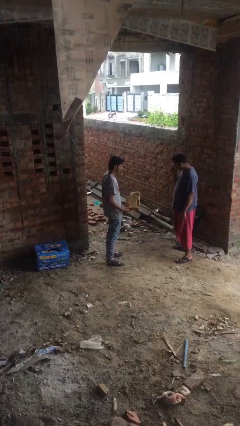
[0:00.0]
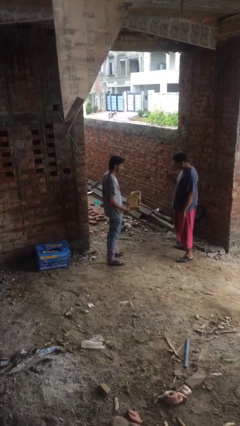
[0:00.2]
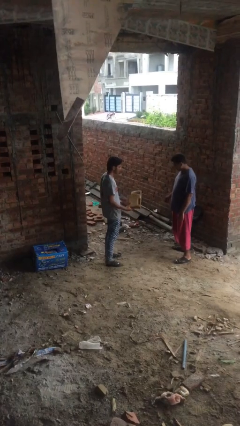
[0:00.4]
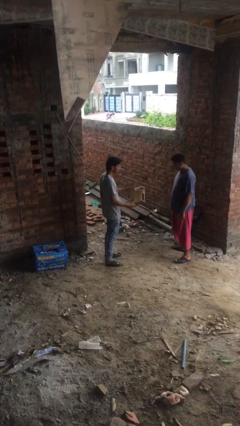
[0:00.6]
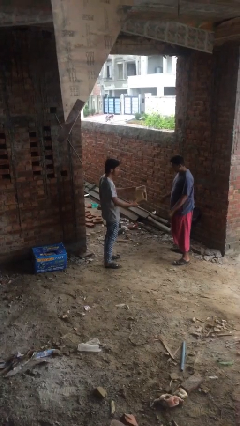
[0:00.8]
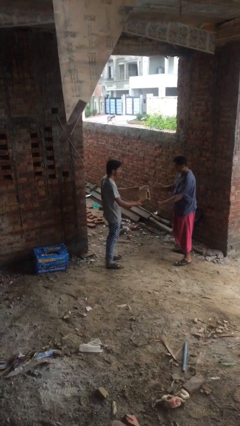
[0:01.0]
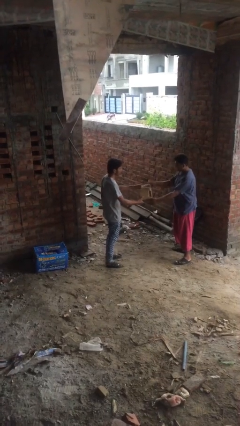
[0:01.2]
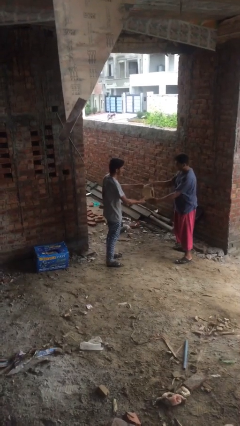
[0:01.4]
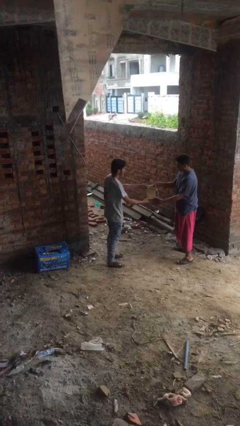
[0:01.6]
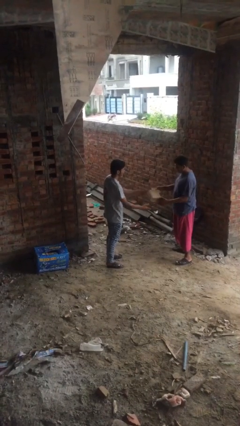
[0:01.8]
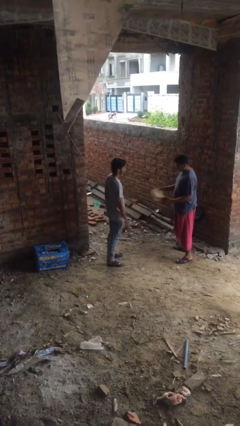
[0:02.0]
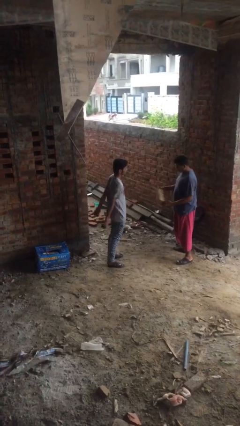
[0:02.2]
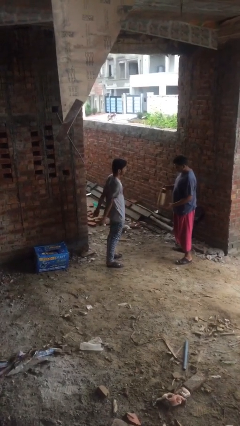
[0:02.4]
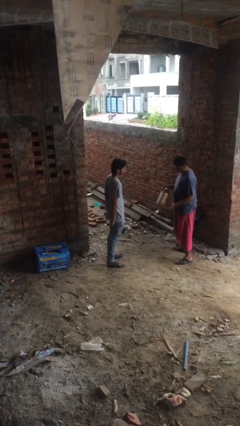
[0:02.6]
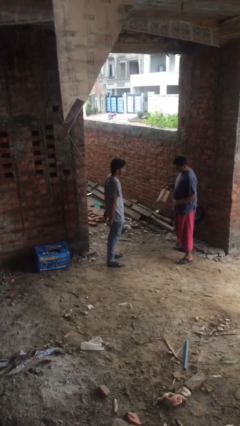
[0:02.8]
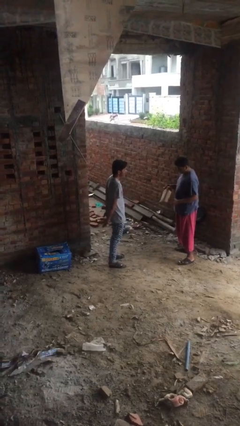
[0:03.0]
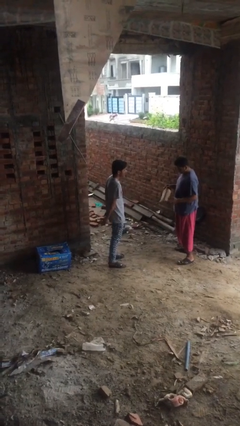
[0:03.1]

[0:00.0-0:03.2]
person transfers object to person

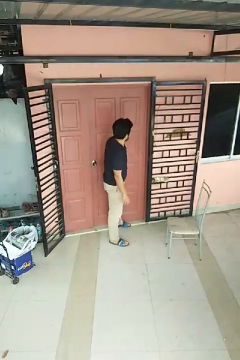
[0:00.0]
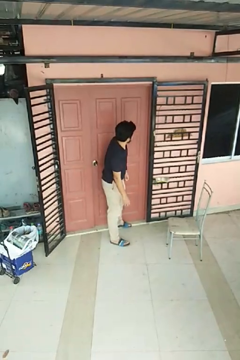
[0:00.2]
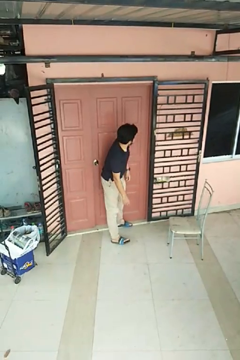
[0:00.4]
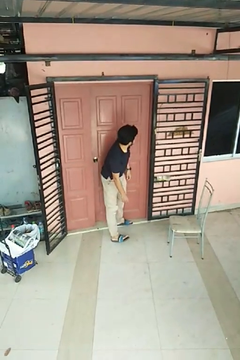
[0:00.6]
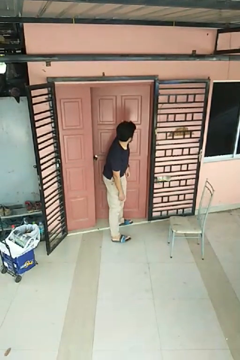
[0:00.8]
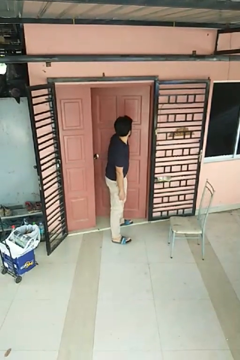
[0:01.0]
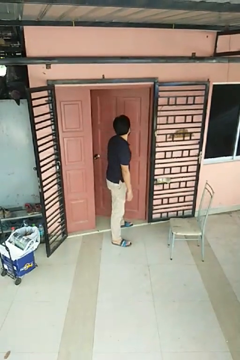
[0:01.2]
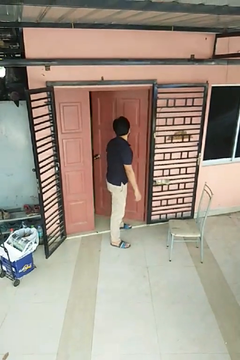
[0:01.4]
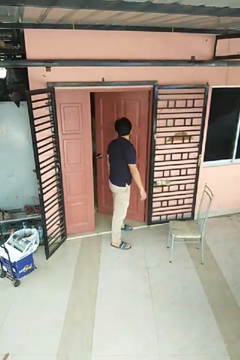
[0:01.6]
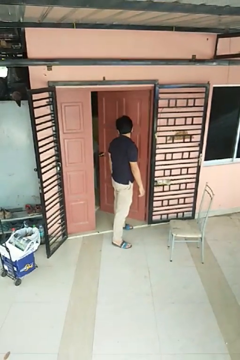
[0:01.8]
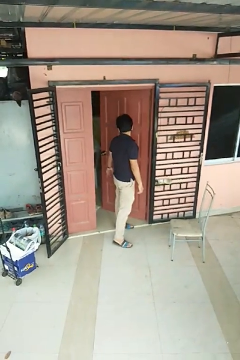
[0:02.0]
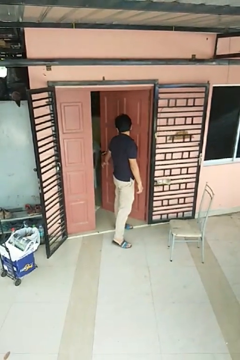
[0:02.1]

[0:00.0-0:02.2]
person opens facility door

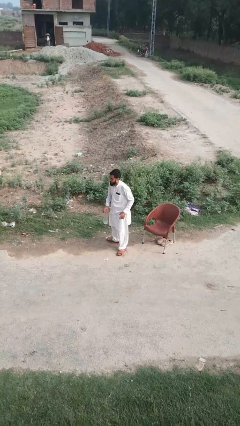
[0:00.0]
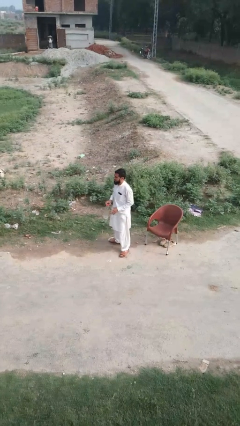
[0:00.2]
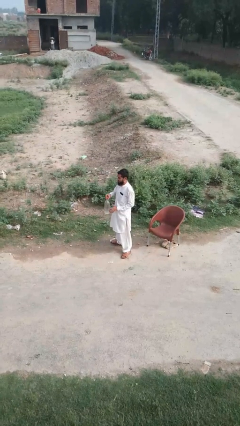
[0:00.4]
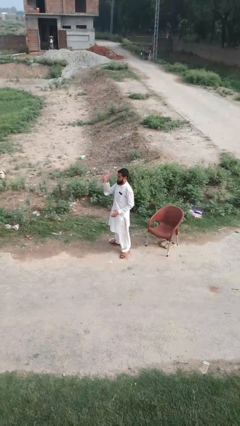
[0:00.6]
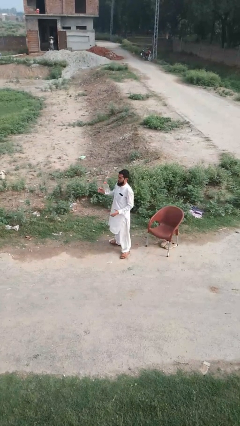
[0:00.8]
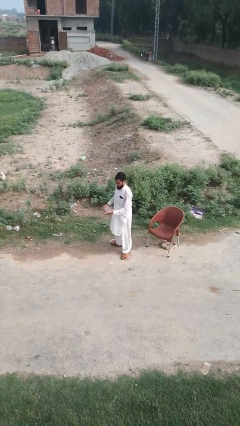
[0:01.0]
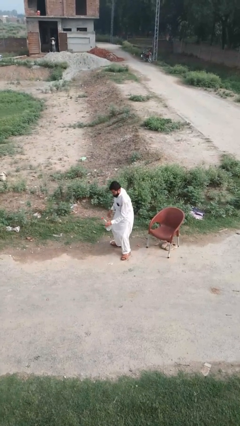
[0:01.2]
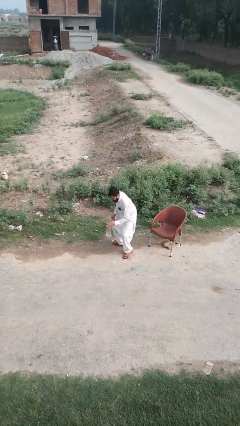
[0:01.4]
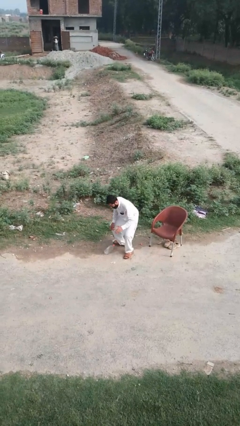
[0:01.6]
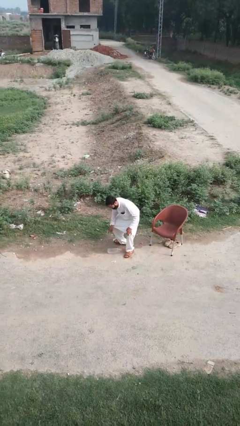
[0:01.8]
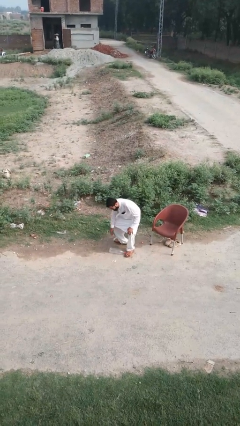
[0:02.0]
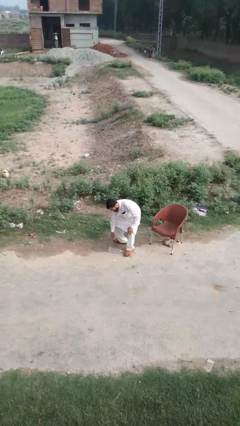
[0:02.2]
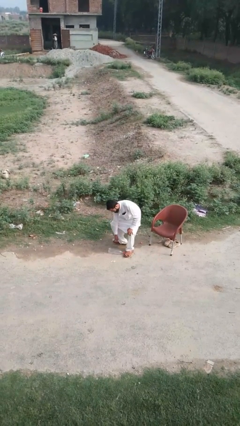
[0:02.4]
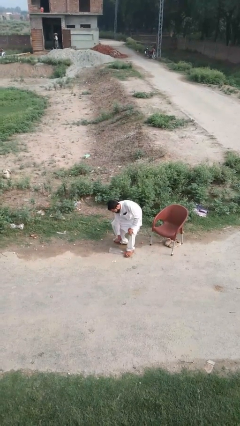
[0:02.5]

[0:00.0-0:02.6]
person drops object

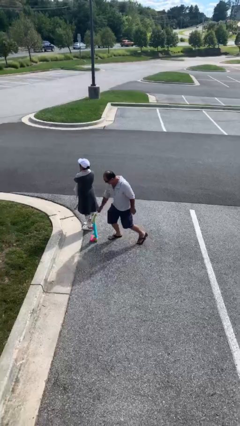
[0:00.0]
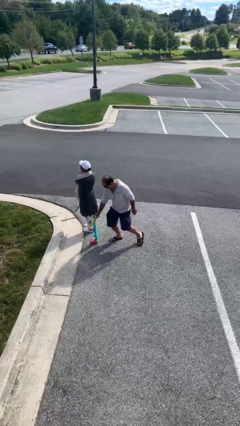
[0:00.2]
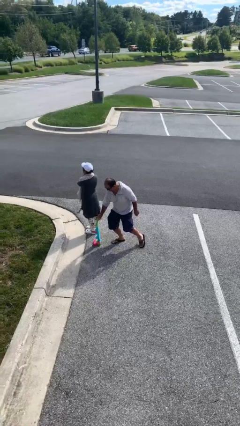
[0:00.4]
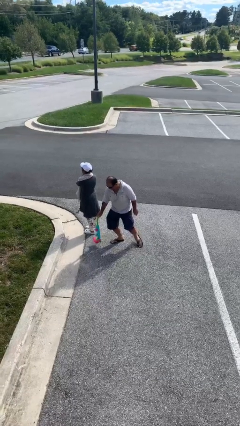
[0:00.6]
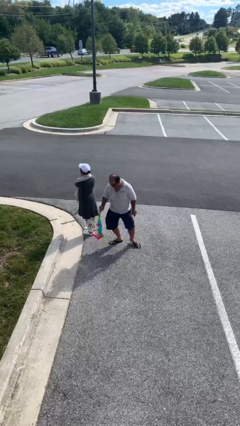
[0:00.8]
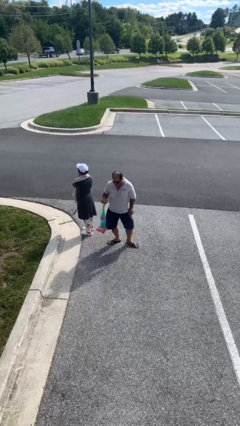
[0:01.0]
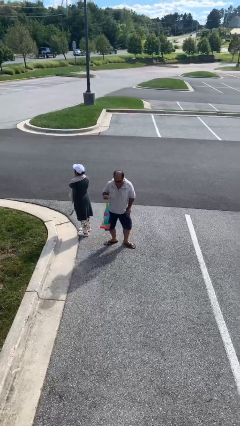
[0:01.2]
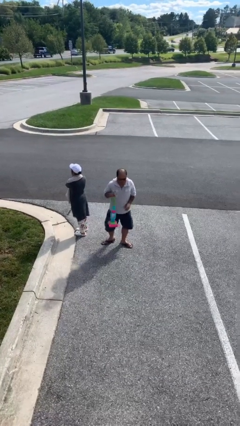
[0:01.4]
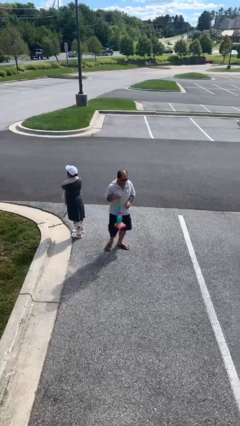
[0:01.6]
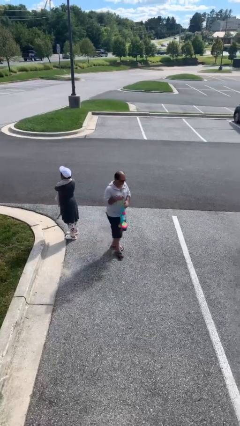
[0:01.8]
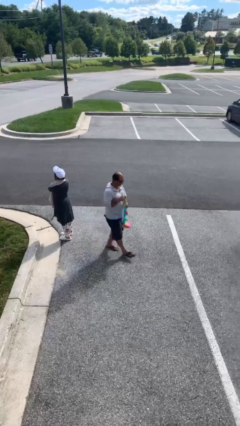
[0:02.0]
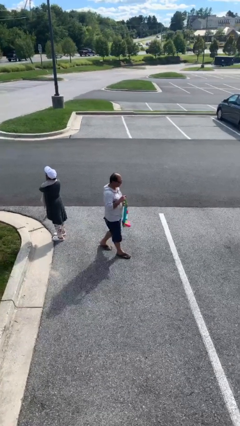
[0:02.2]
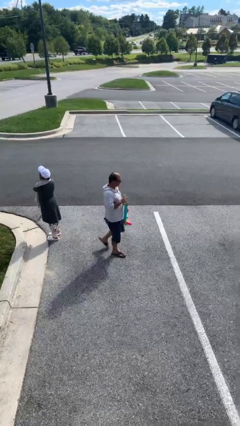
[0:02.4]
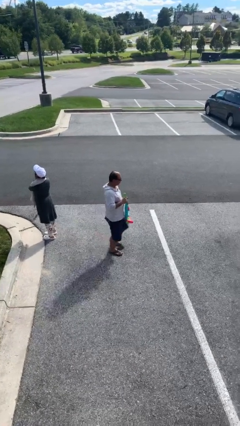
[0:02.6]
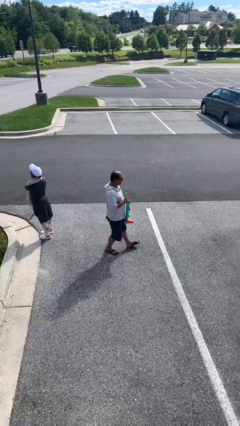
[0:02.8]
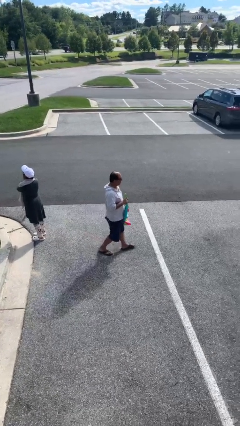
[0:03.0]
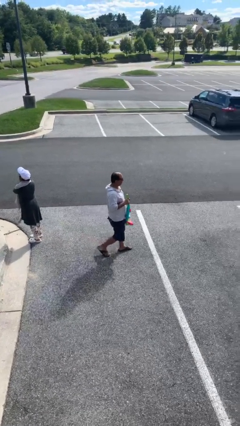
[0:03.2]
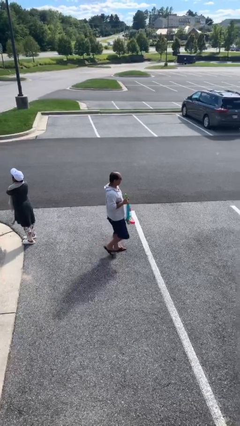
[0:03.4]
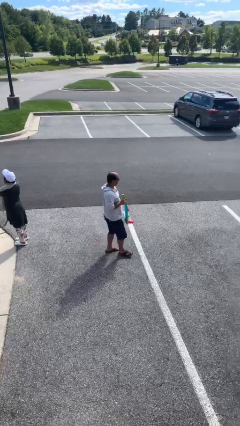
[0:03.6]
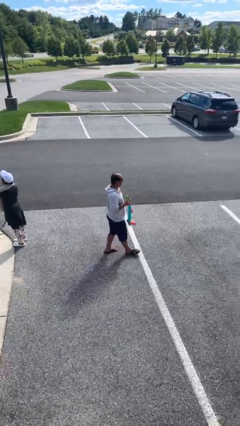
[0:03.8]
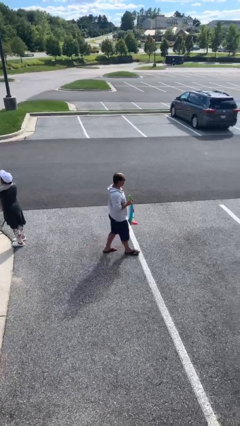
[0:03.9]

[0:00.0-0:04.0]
person steals object from person

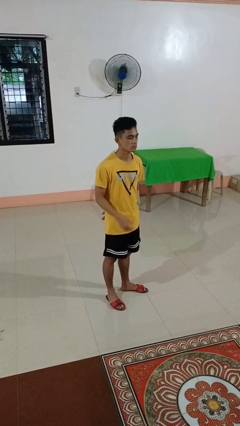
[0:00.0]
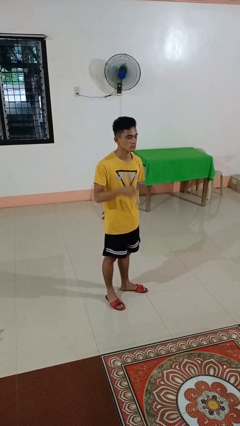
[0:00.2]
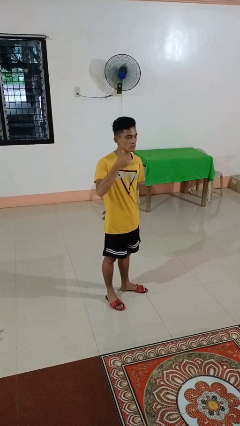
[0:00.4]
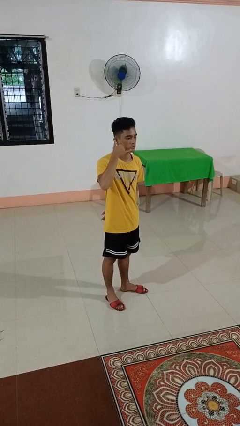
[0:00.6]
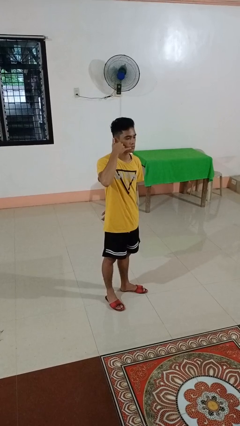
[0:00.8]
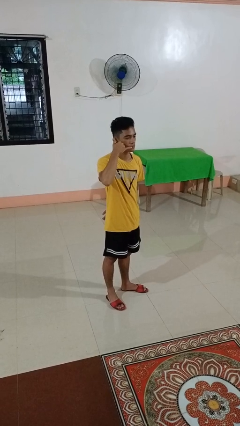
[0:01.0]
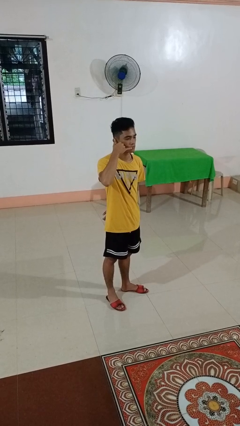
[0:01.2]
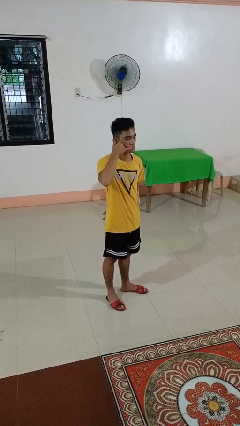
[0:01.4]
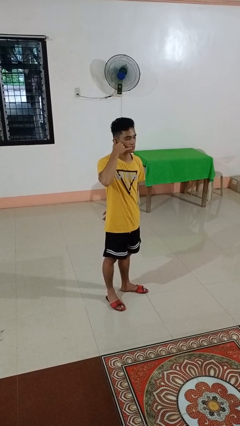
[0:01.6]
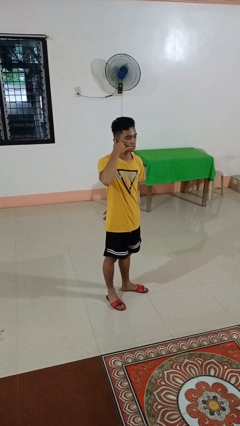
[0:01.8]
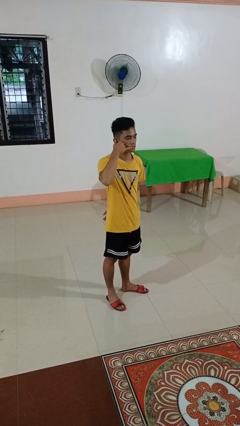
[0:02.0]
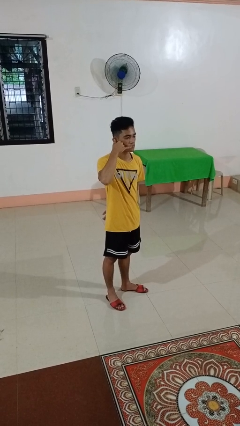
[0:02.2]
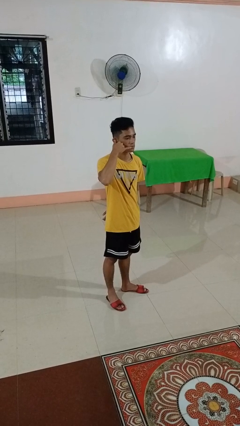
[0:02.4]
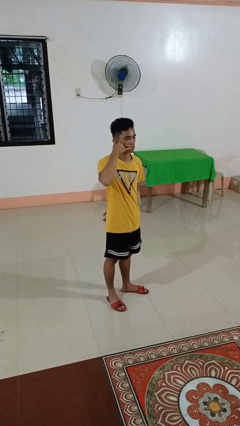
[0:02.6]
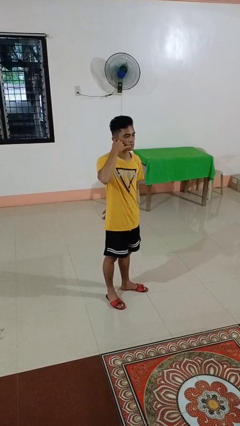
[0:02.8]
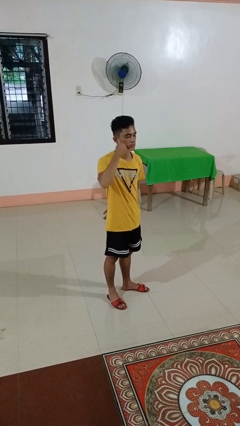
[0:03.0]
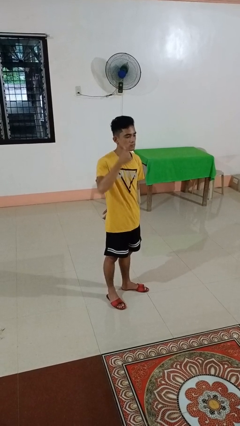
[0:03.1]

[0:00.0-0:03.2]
person gestures call me

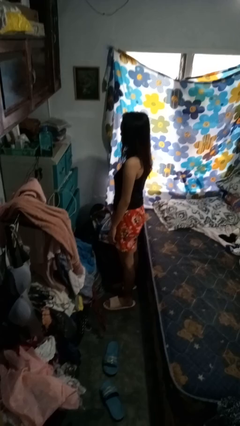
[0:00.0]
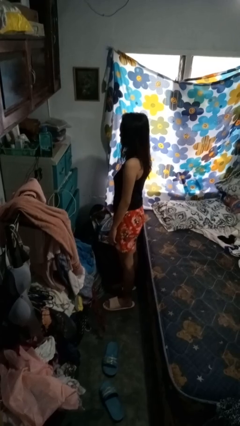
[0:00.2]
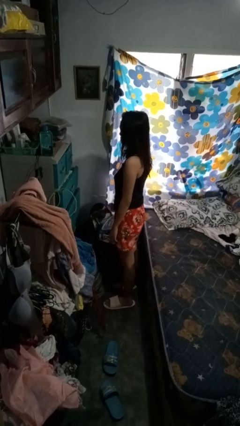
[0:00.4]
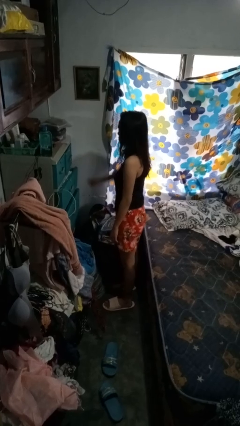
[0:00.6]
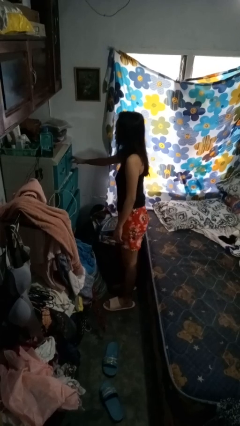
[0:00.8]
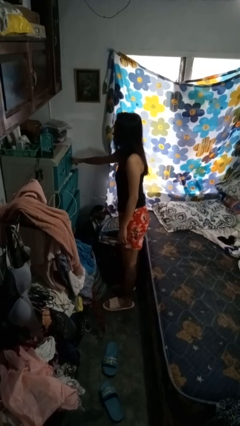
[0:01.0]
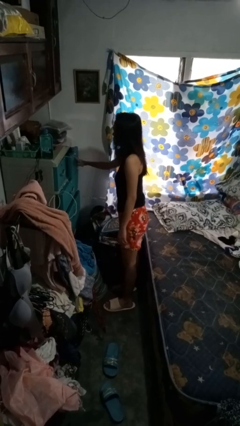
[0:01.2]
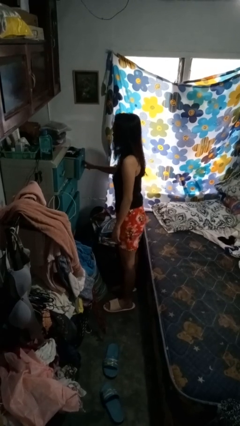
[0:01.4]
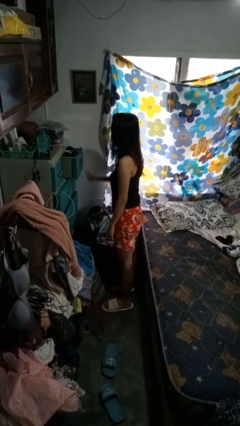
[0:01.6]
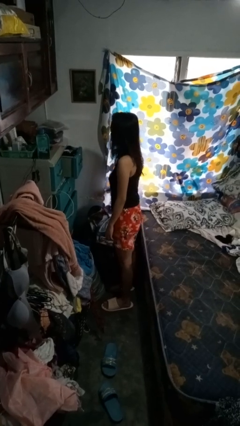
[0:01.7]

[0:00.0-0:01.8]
person opens dresser drawer

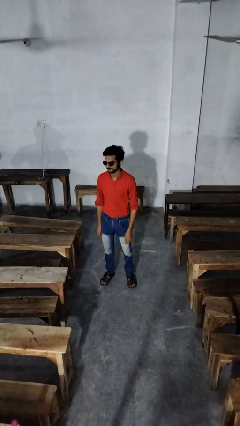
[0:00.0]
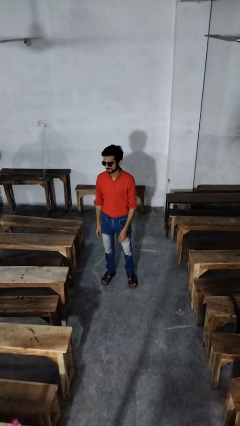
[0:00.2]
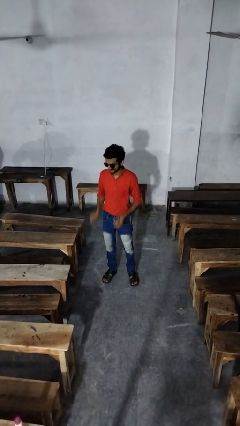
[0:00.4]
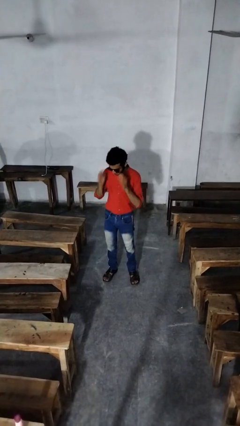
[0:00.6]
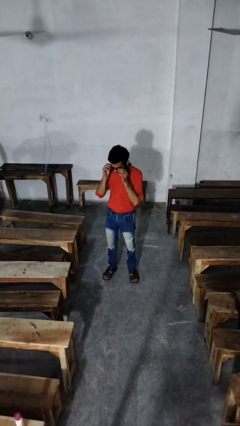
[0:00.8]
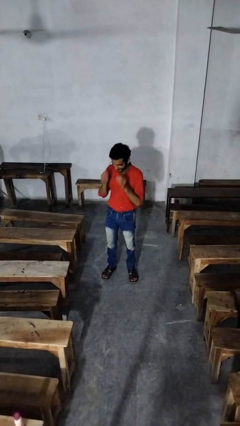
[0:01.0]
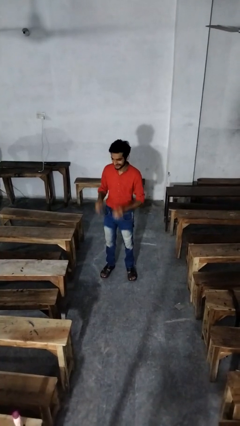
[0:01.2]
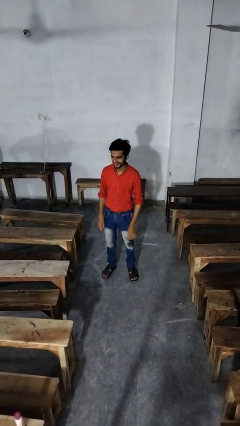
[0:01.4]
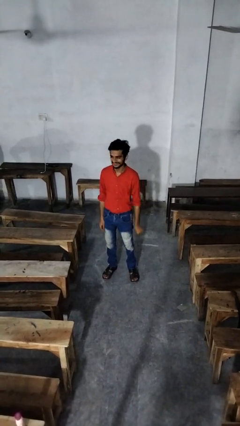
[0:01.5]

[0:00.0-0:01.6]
person takes off sunglasses
